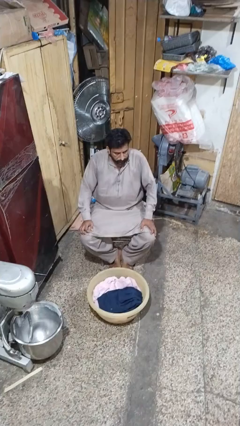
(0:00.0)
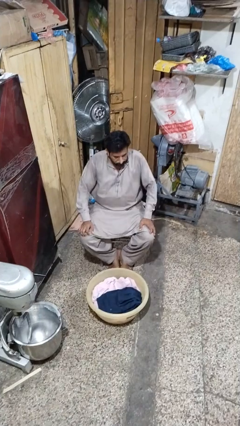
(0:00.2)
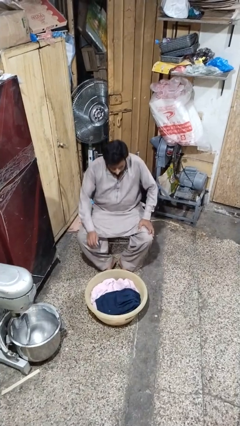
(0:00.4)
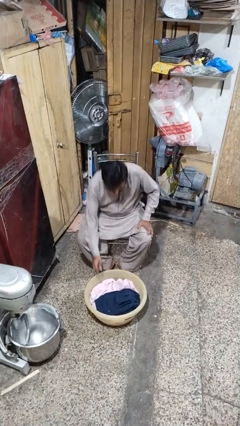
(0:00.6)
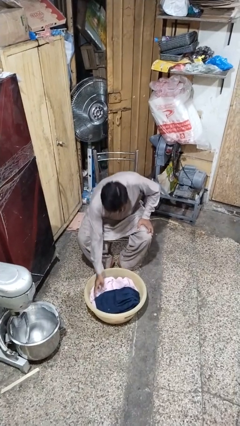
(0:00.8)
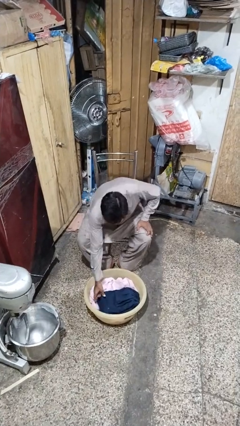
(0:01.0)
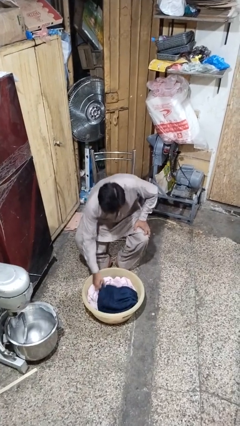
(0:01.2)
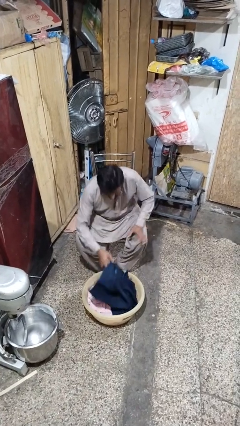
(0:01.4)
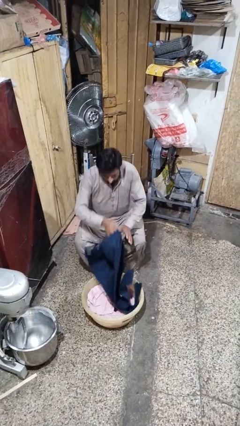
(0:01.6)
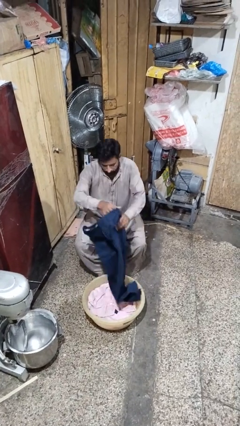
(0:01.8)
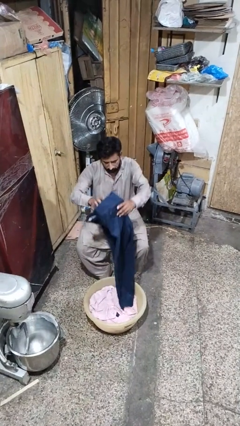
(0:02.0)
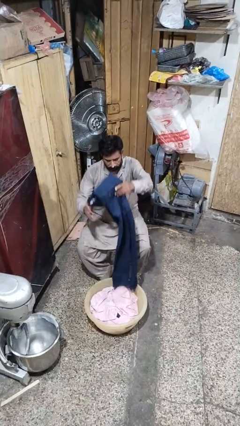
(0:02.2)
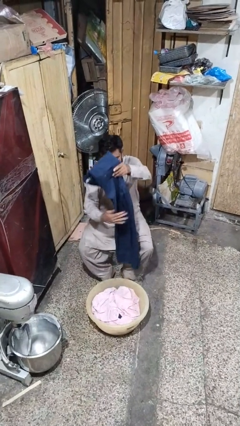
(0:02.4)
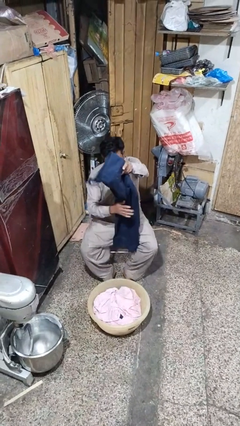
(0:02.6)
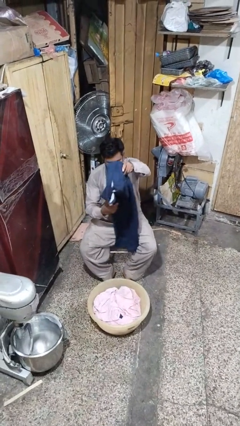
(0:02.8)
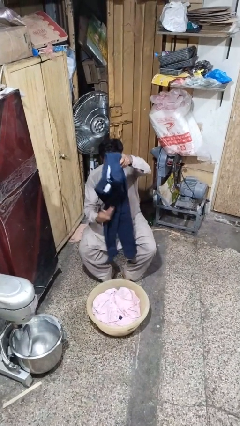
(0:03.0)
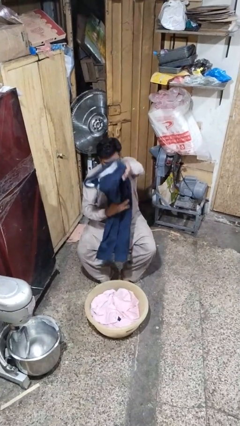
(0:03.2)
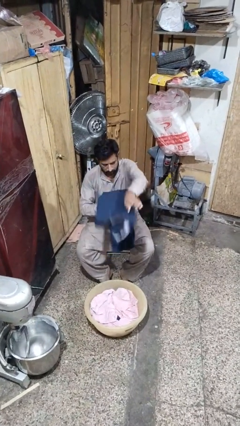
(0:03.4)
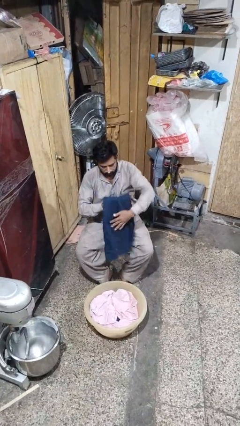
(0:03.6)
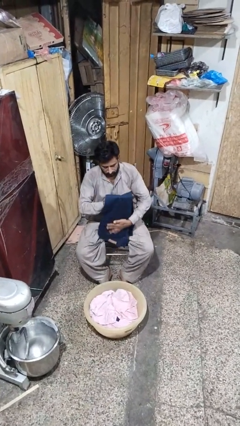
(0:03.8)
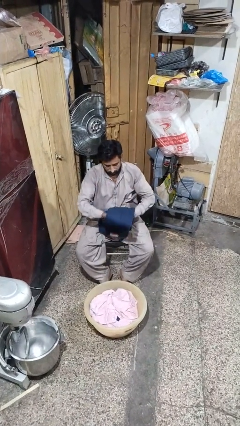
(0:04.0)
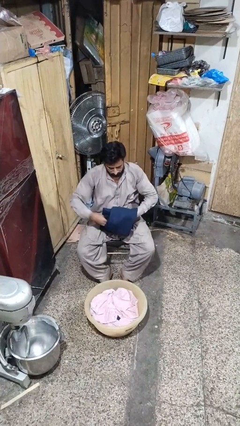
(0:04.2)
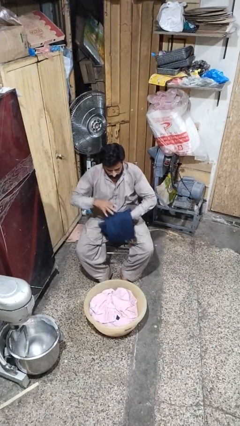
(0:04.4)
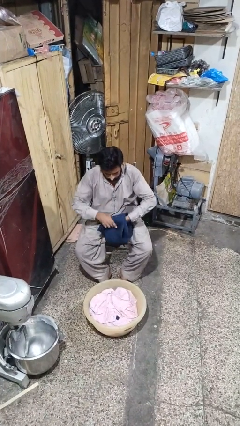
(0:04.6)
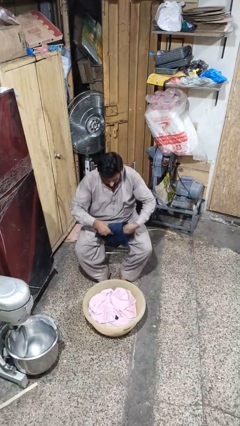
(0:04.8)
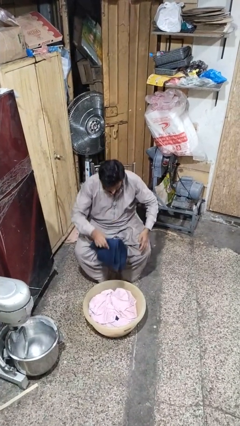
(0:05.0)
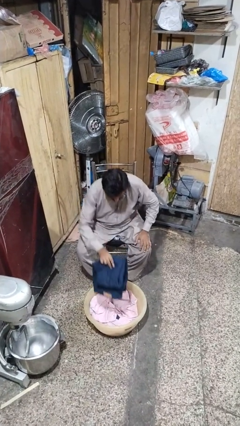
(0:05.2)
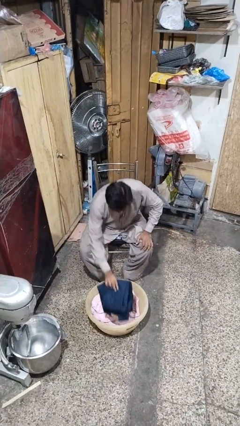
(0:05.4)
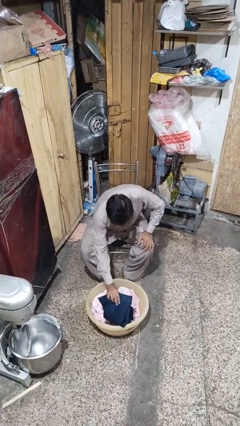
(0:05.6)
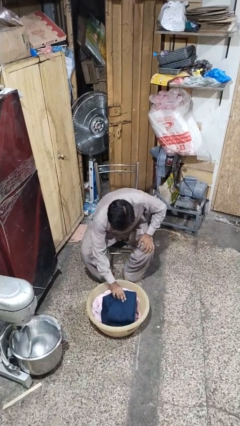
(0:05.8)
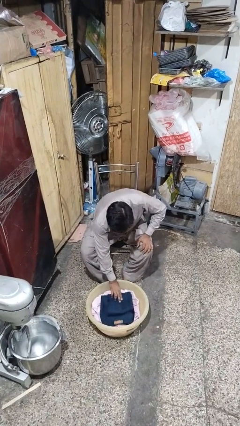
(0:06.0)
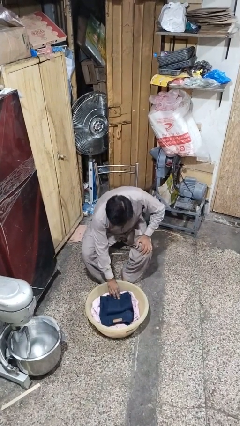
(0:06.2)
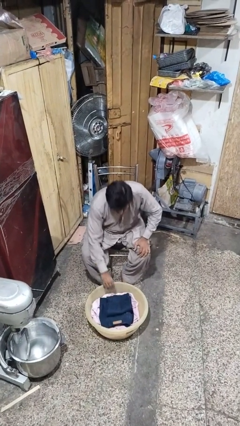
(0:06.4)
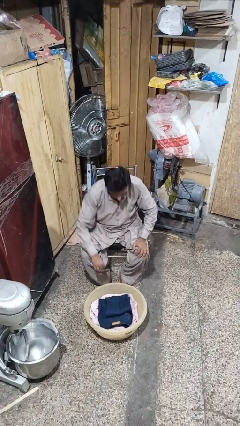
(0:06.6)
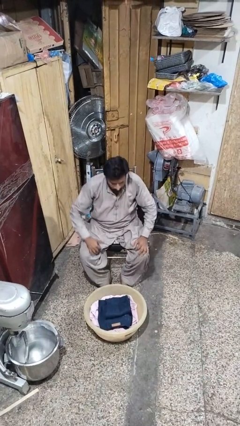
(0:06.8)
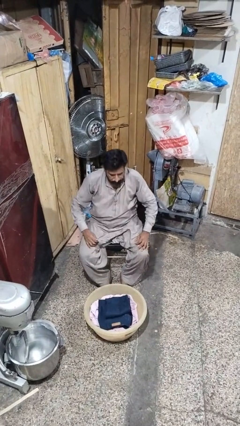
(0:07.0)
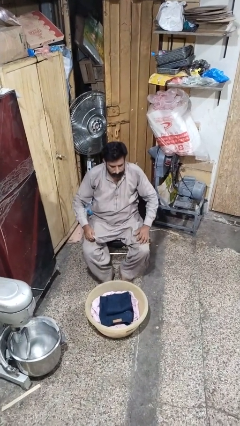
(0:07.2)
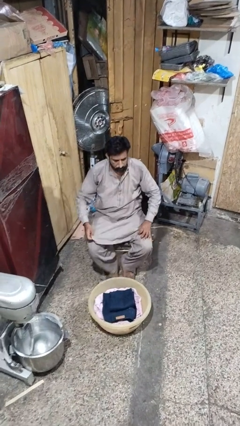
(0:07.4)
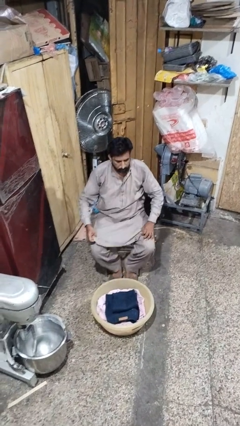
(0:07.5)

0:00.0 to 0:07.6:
person folds pants

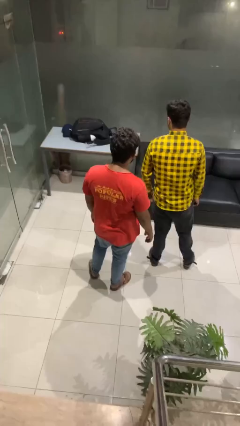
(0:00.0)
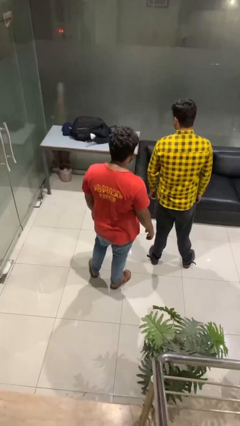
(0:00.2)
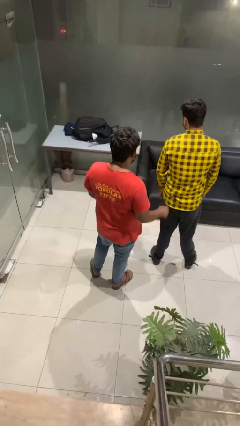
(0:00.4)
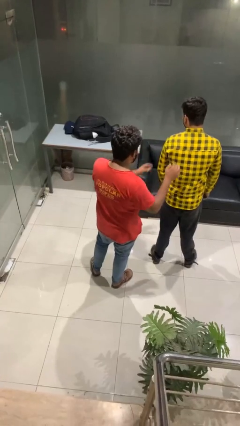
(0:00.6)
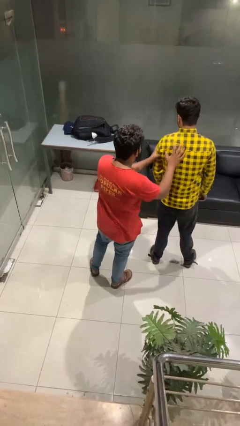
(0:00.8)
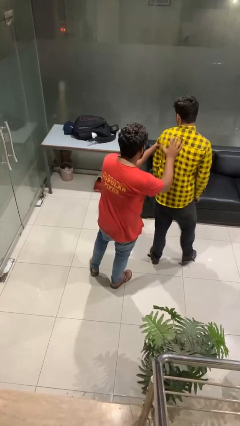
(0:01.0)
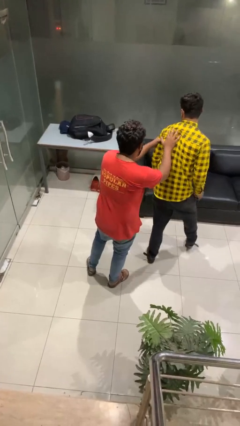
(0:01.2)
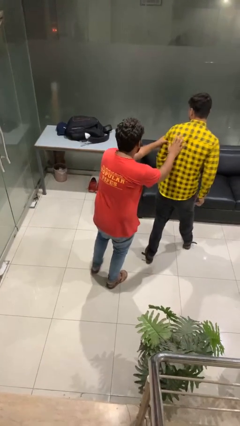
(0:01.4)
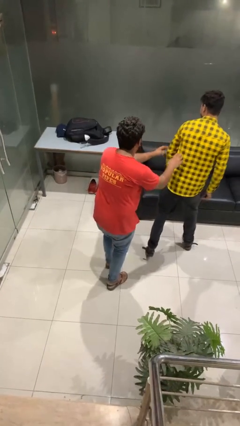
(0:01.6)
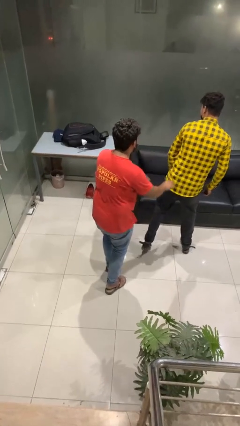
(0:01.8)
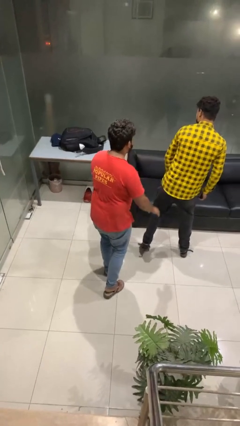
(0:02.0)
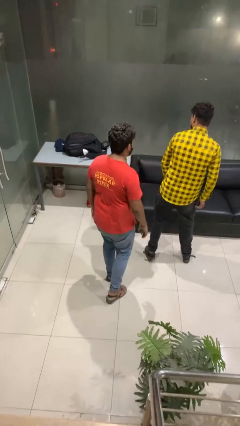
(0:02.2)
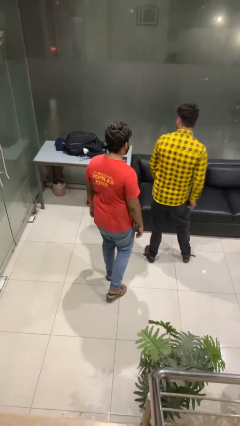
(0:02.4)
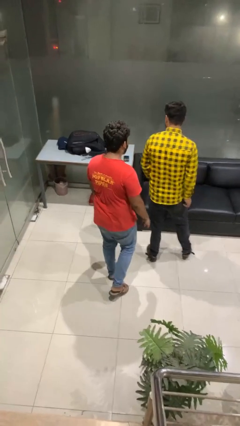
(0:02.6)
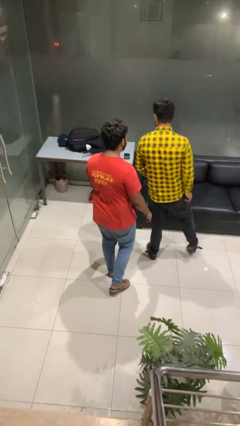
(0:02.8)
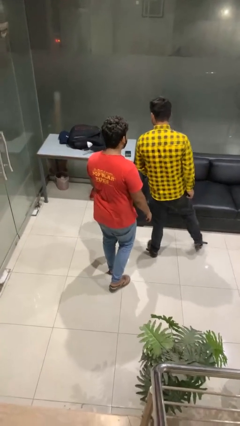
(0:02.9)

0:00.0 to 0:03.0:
person shoves person

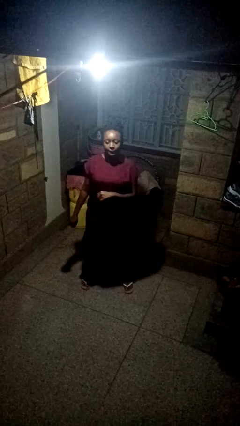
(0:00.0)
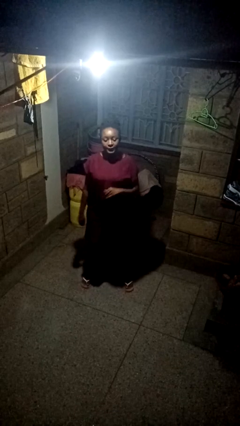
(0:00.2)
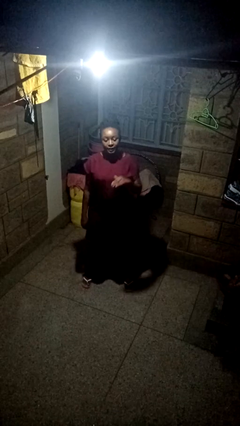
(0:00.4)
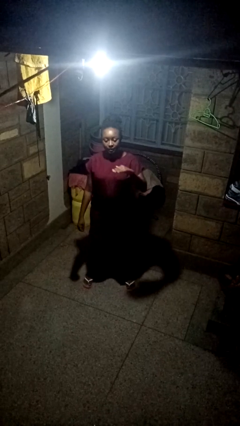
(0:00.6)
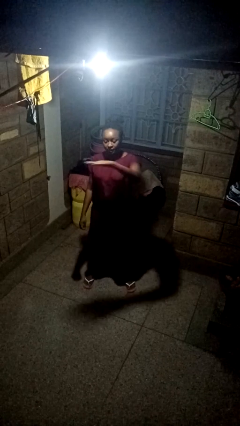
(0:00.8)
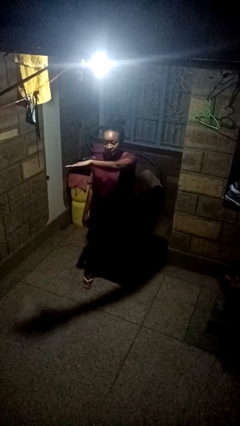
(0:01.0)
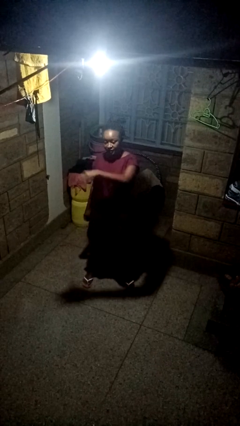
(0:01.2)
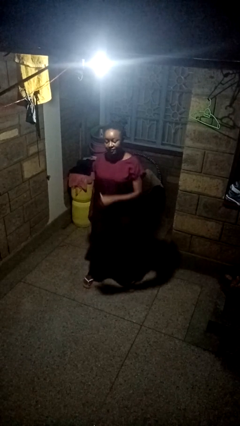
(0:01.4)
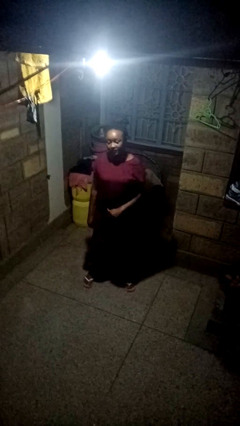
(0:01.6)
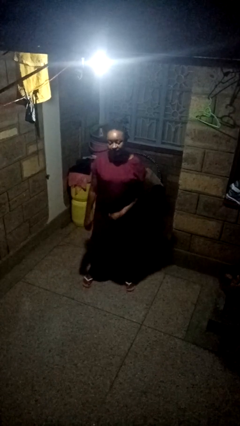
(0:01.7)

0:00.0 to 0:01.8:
person karate chop

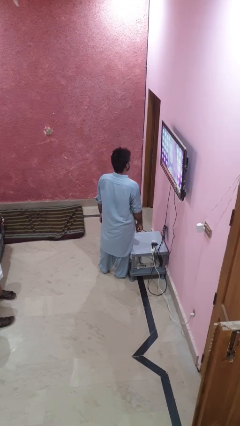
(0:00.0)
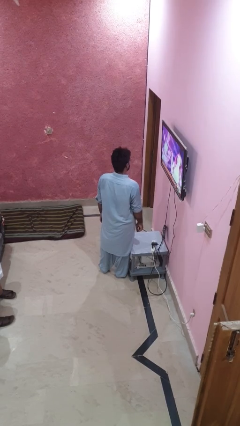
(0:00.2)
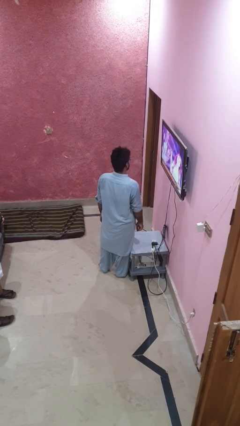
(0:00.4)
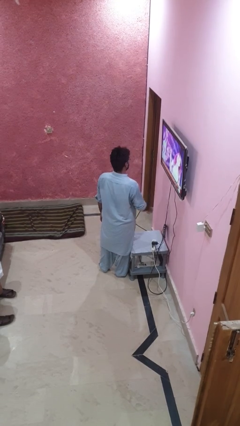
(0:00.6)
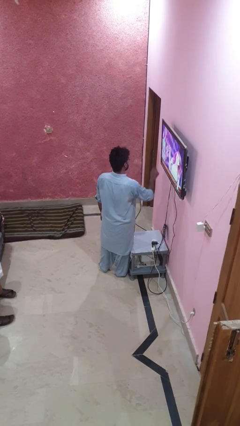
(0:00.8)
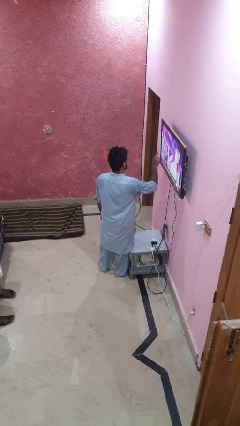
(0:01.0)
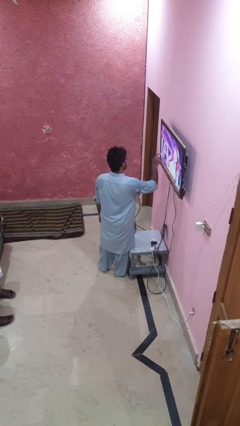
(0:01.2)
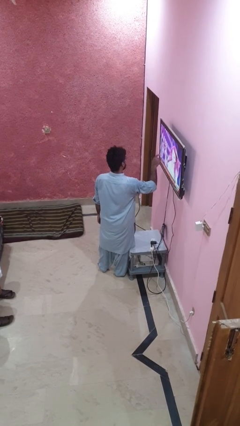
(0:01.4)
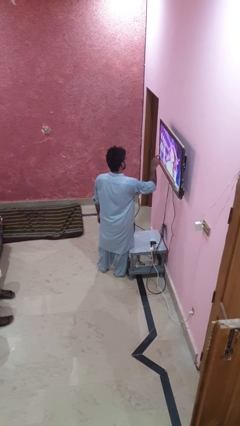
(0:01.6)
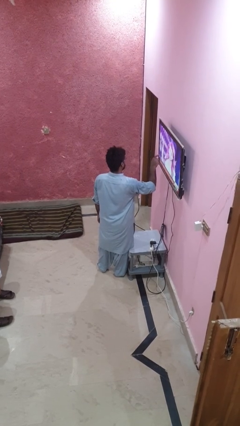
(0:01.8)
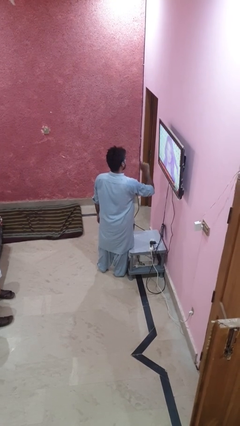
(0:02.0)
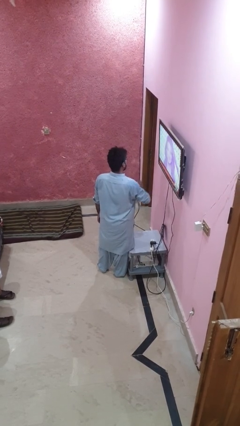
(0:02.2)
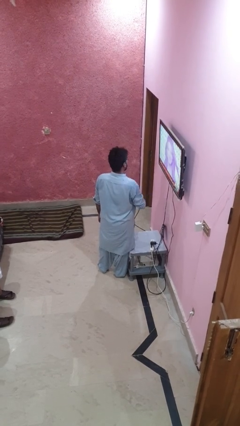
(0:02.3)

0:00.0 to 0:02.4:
person taps object with finger

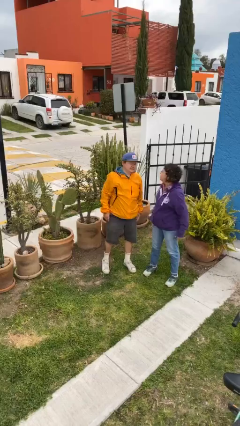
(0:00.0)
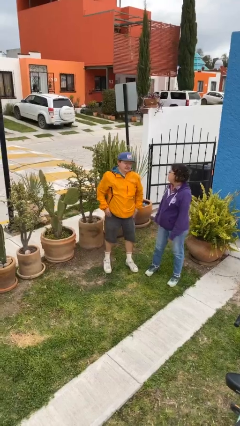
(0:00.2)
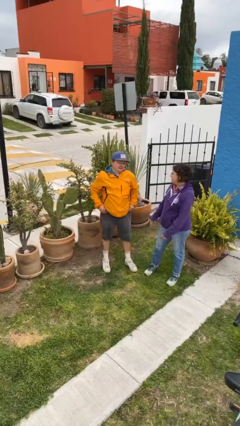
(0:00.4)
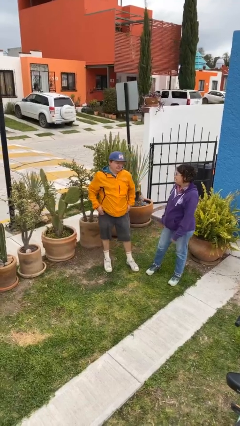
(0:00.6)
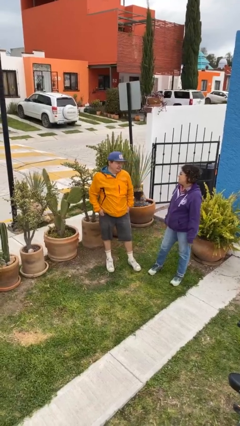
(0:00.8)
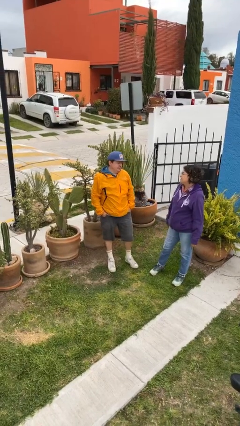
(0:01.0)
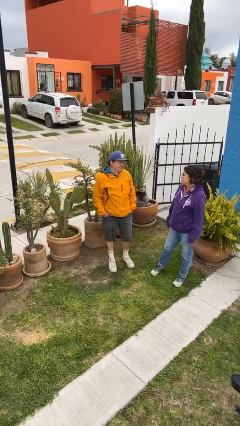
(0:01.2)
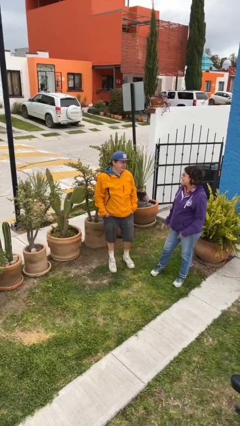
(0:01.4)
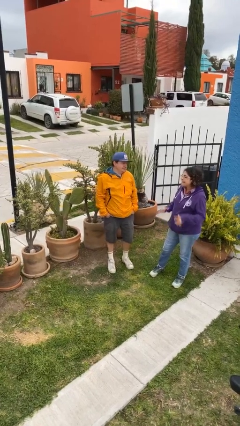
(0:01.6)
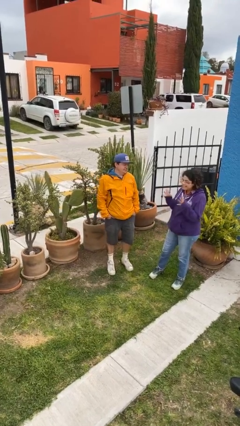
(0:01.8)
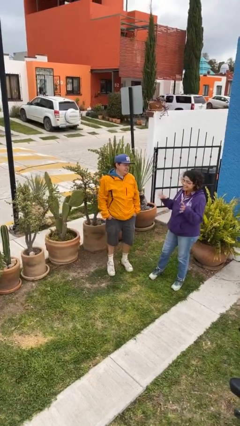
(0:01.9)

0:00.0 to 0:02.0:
person talks to person

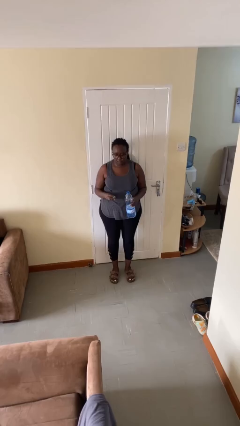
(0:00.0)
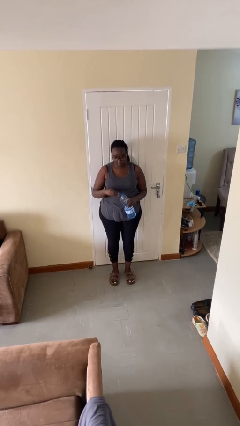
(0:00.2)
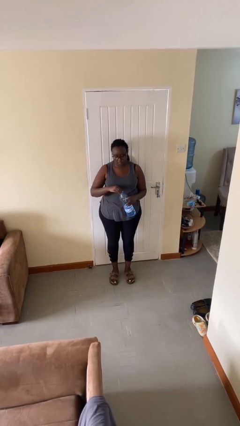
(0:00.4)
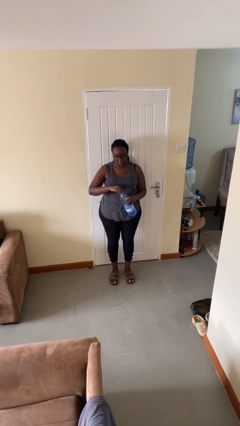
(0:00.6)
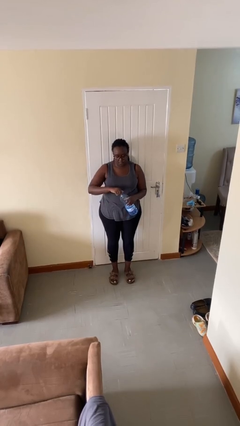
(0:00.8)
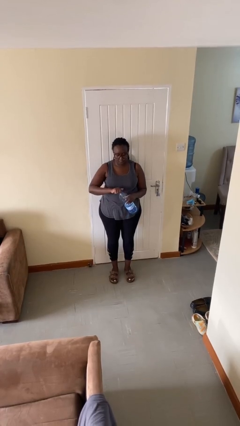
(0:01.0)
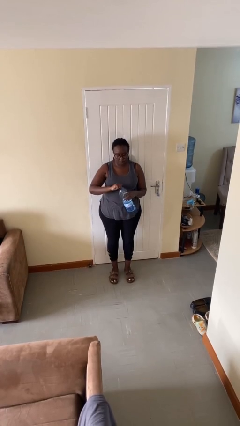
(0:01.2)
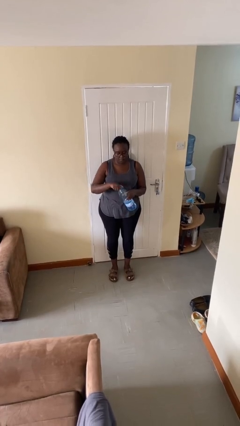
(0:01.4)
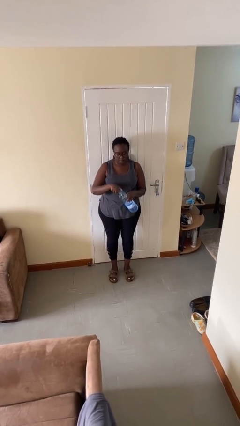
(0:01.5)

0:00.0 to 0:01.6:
person screws lid to bottle
